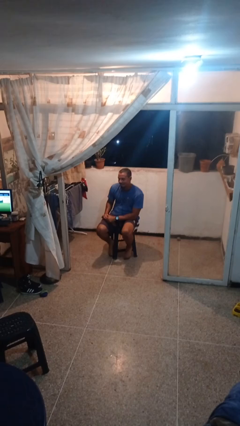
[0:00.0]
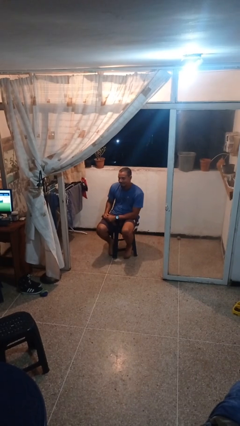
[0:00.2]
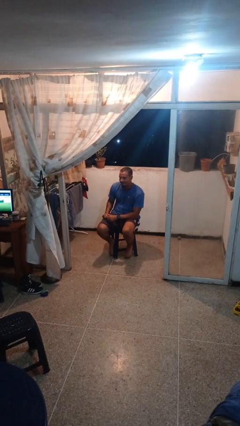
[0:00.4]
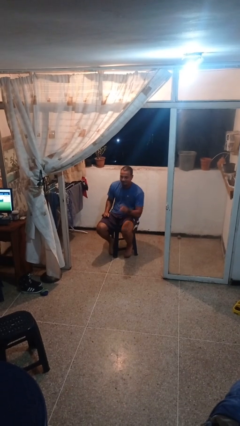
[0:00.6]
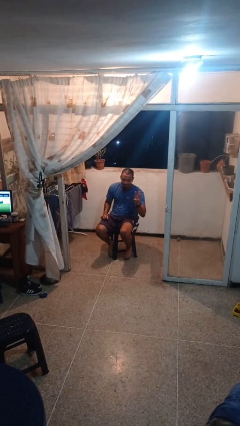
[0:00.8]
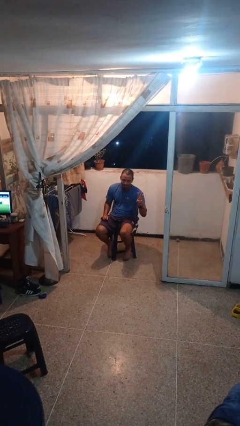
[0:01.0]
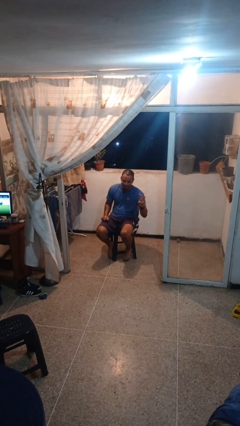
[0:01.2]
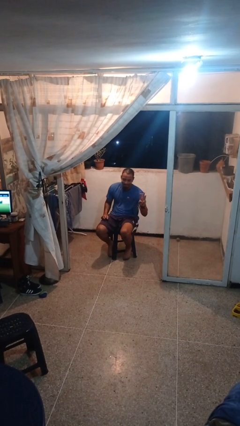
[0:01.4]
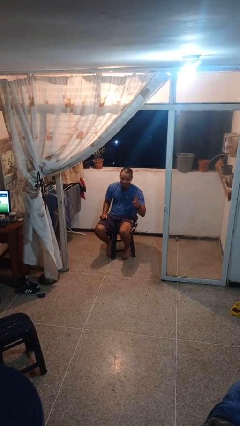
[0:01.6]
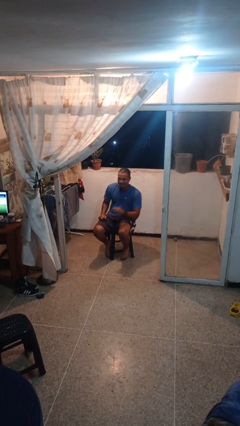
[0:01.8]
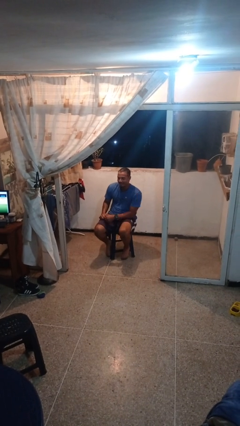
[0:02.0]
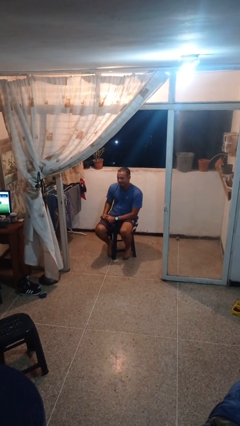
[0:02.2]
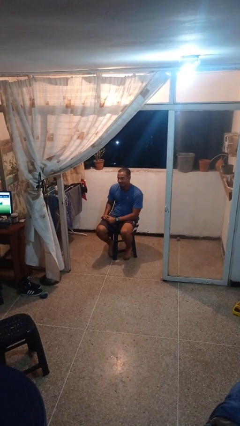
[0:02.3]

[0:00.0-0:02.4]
person gestures number three

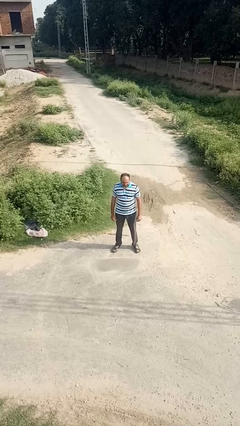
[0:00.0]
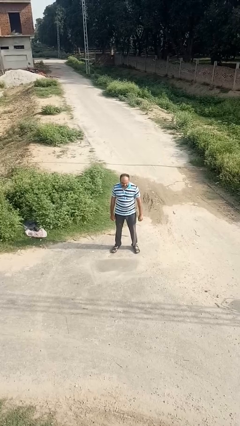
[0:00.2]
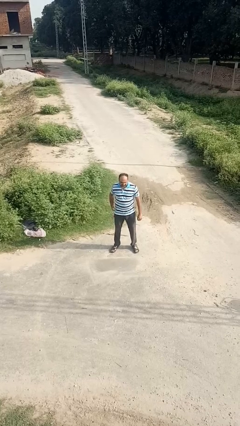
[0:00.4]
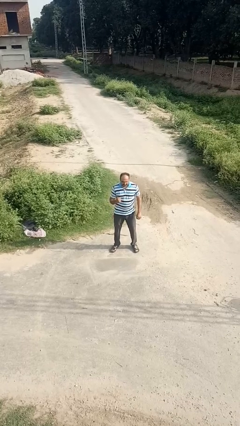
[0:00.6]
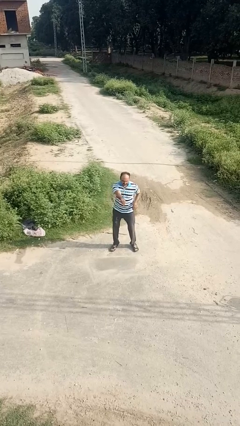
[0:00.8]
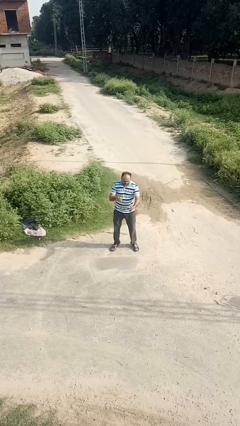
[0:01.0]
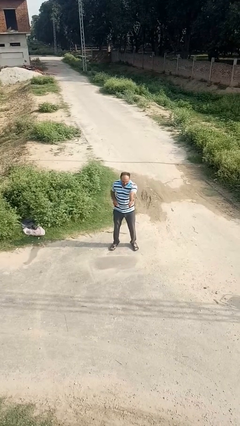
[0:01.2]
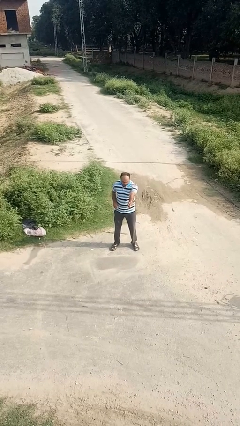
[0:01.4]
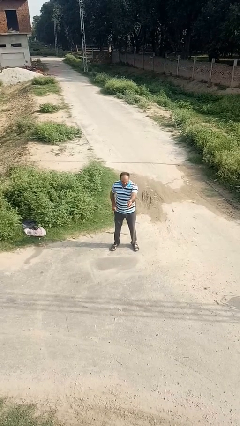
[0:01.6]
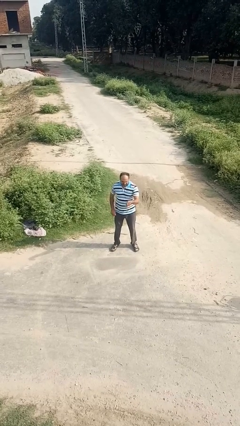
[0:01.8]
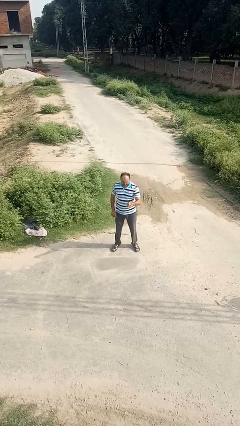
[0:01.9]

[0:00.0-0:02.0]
person punches

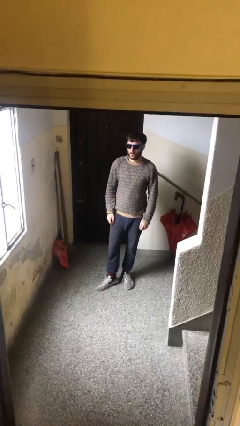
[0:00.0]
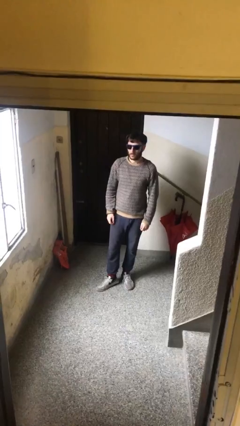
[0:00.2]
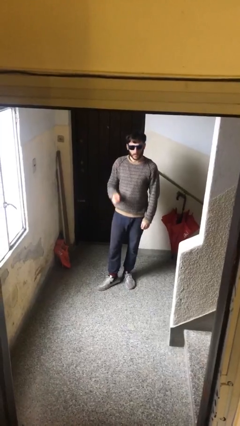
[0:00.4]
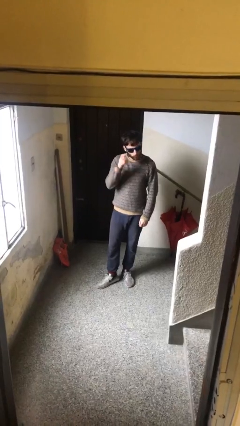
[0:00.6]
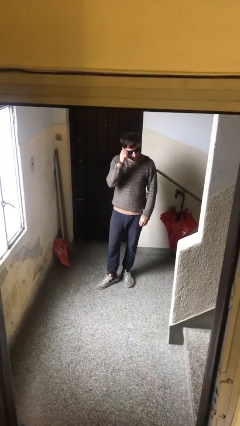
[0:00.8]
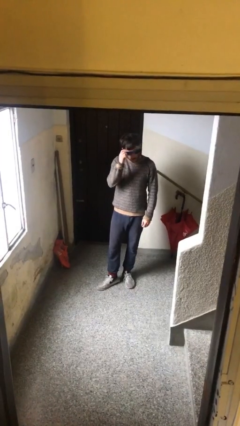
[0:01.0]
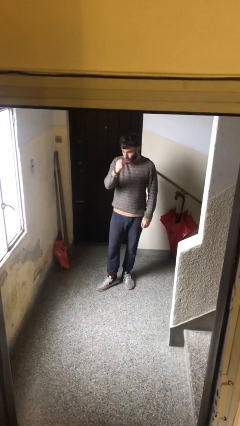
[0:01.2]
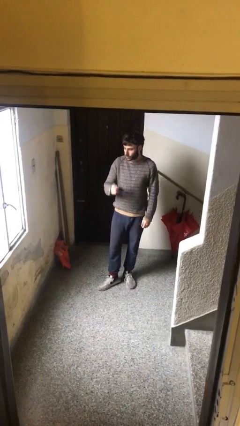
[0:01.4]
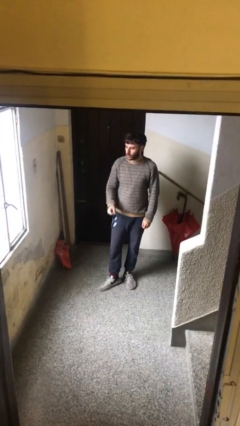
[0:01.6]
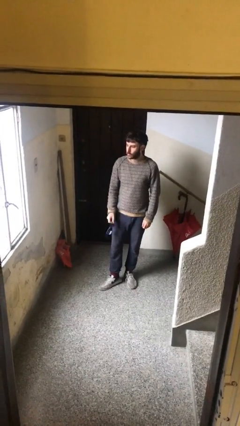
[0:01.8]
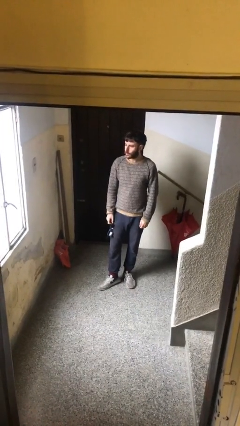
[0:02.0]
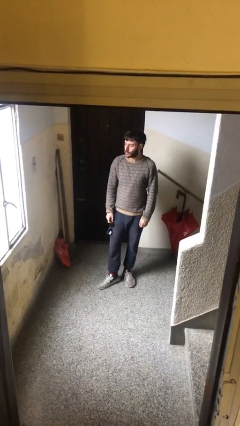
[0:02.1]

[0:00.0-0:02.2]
person takes off sunglasses

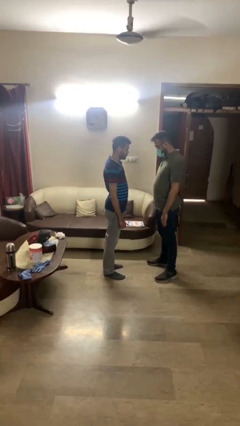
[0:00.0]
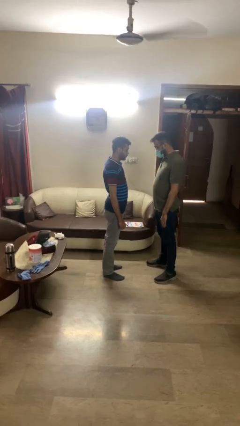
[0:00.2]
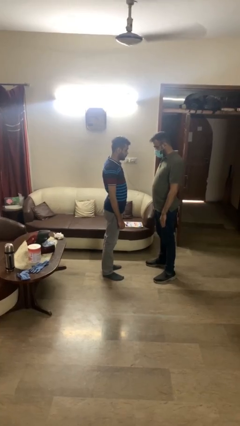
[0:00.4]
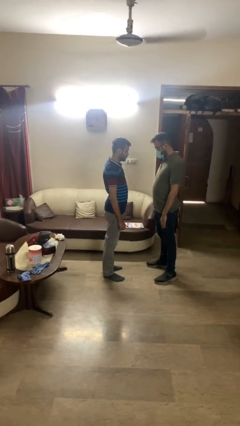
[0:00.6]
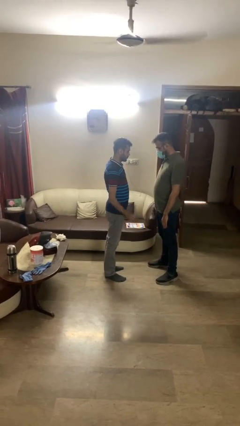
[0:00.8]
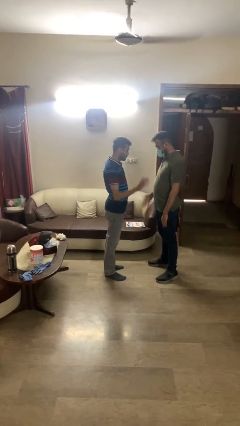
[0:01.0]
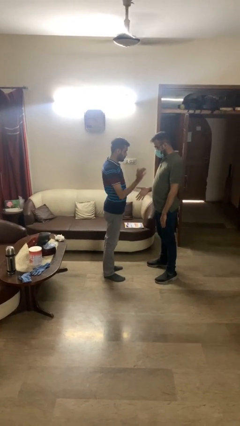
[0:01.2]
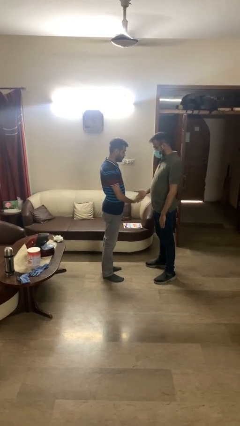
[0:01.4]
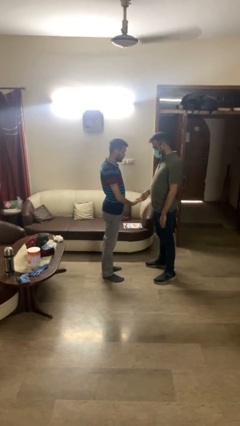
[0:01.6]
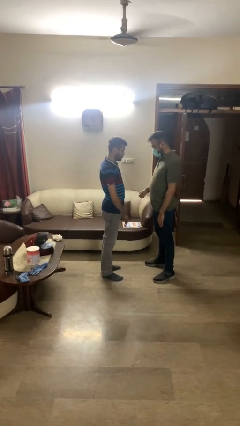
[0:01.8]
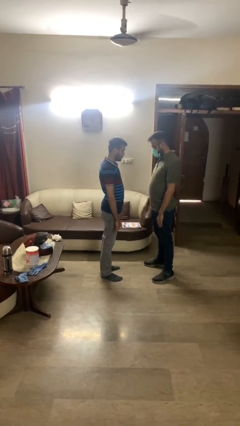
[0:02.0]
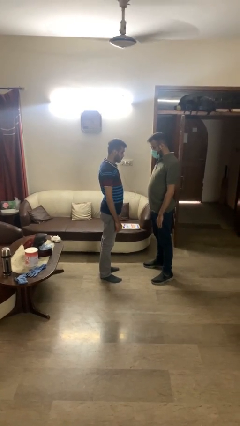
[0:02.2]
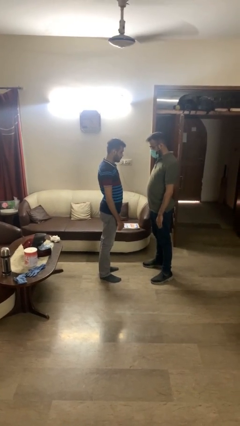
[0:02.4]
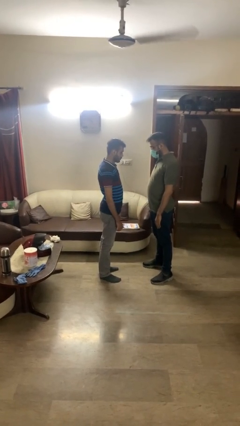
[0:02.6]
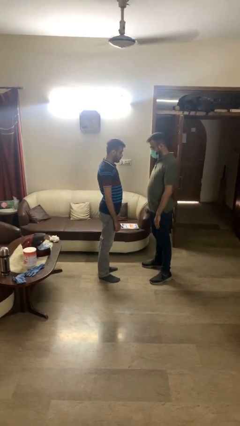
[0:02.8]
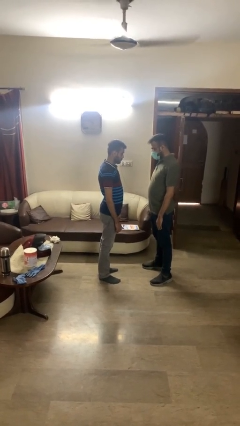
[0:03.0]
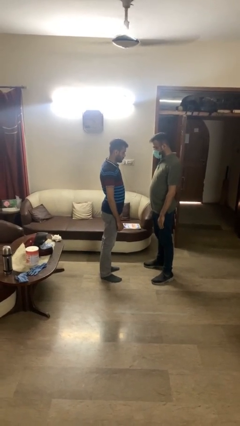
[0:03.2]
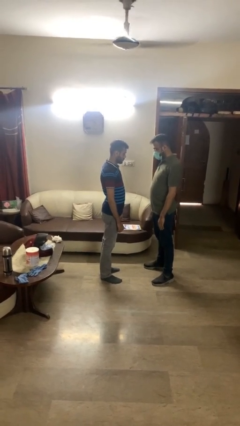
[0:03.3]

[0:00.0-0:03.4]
person highfives hand

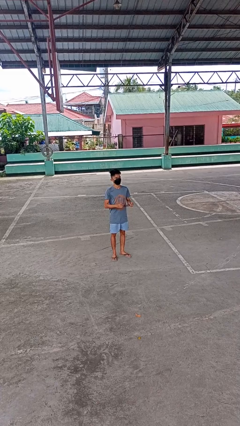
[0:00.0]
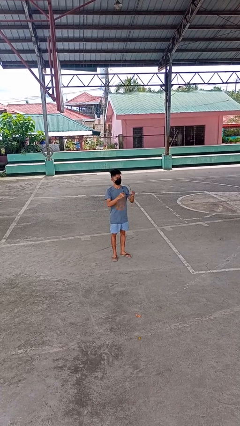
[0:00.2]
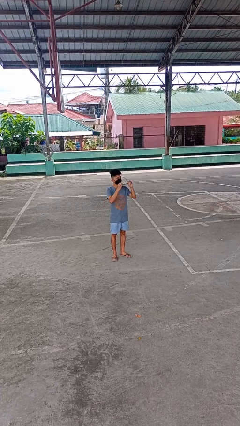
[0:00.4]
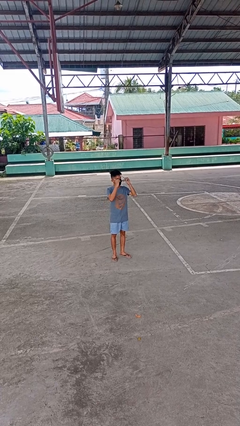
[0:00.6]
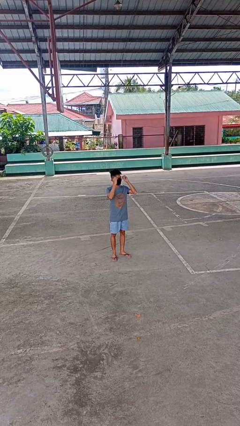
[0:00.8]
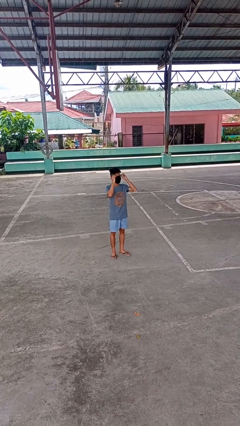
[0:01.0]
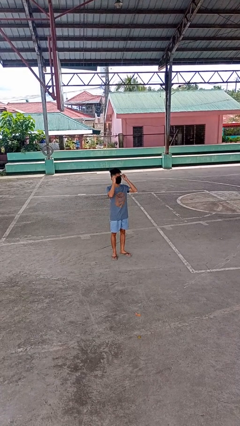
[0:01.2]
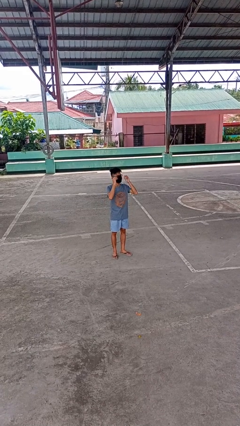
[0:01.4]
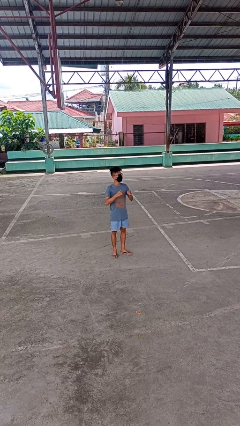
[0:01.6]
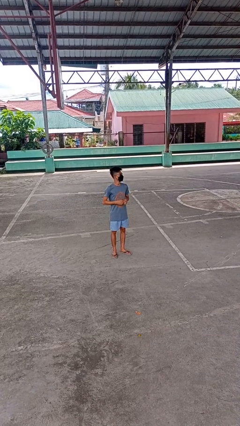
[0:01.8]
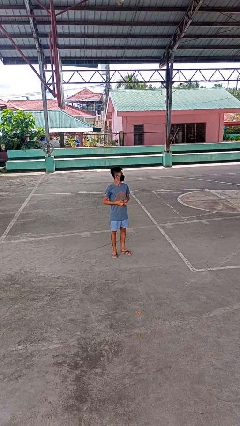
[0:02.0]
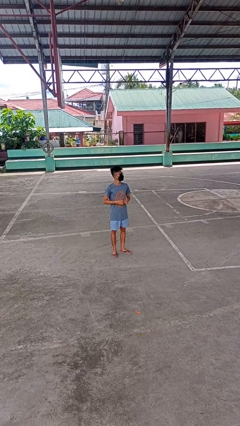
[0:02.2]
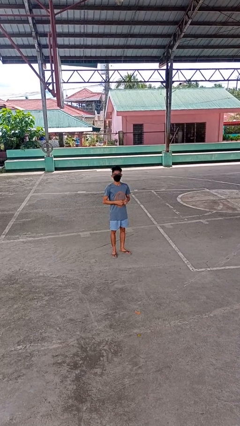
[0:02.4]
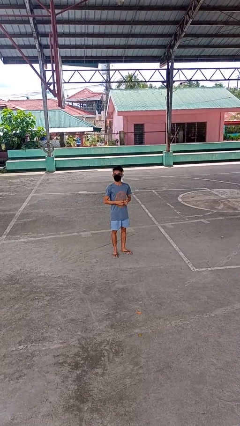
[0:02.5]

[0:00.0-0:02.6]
person puts on glasses

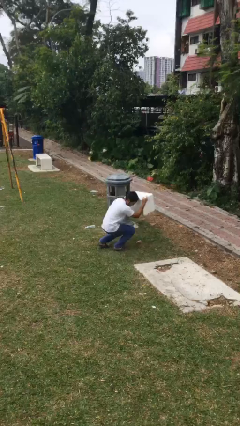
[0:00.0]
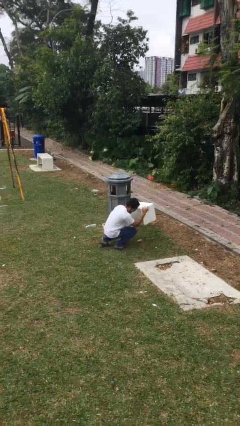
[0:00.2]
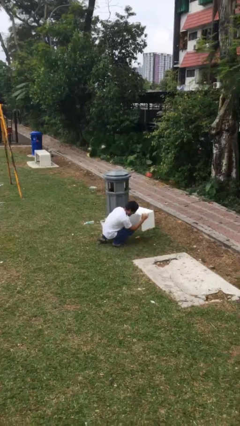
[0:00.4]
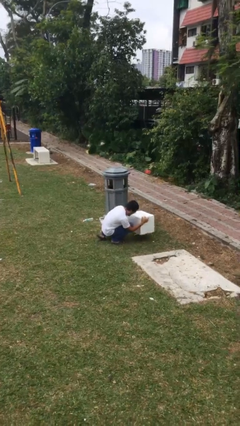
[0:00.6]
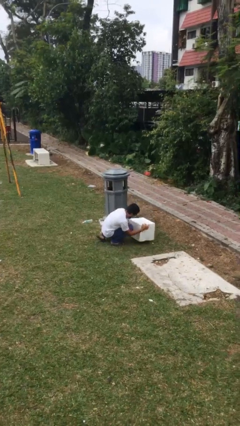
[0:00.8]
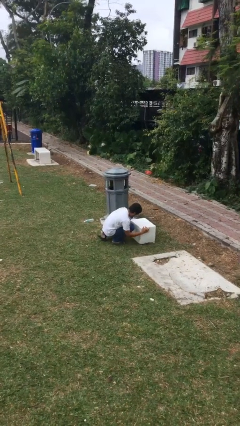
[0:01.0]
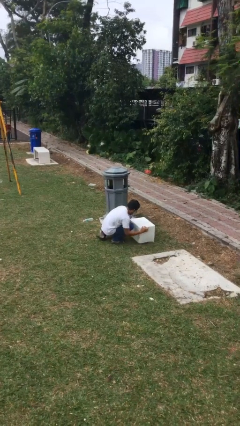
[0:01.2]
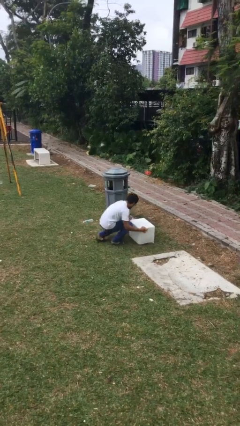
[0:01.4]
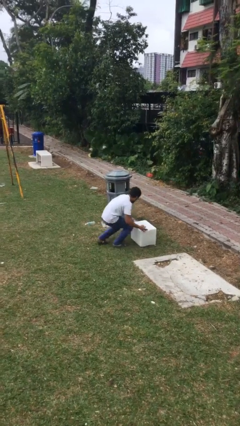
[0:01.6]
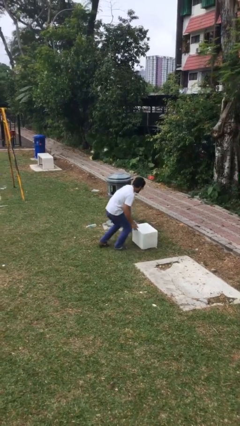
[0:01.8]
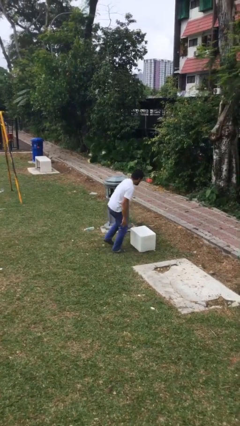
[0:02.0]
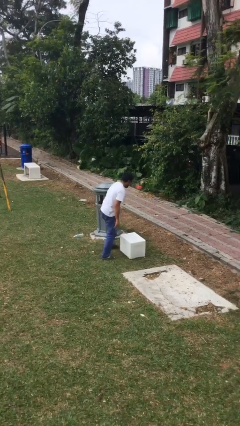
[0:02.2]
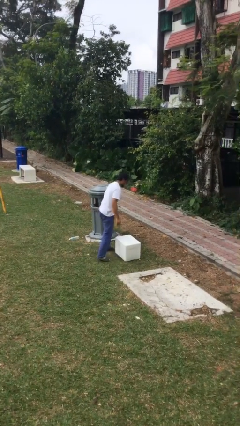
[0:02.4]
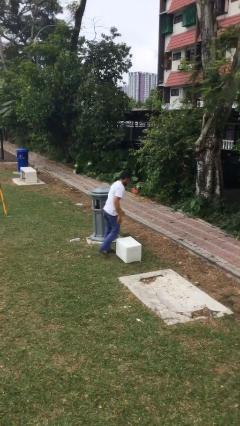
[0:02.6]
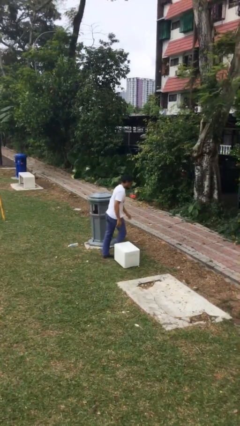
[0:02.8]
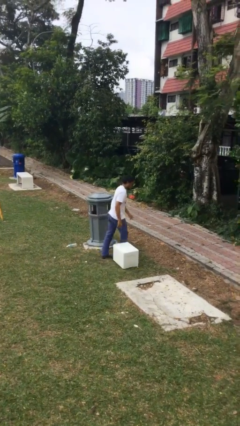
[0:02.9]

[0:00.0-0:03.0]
person puts down object on floor

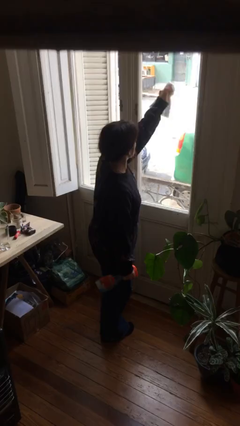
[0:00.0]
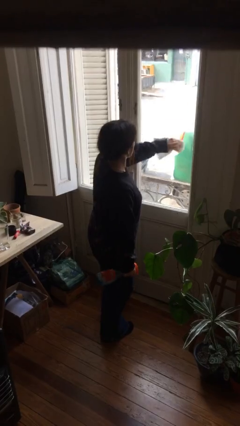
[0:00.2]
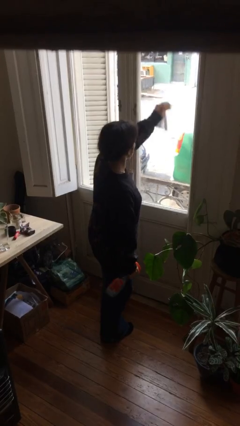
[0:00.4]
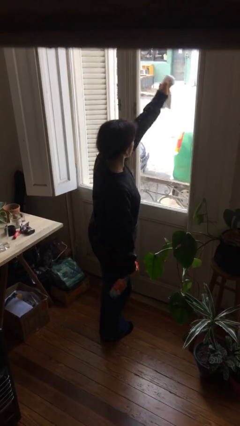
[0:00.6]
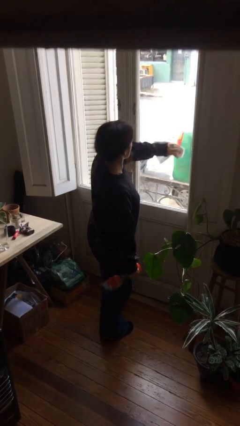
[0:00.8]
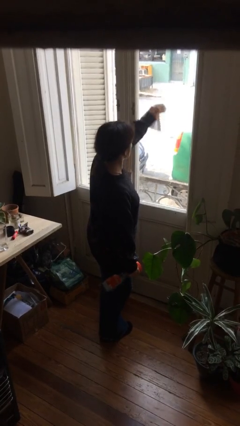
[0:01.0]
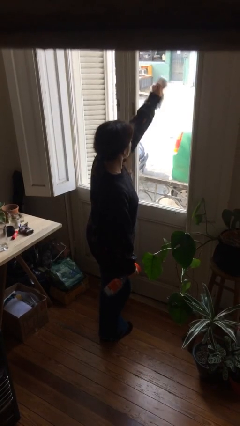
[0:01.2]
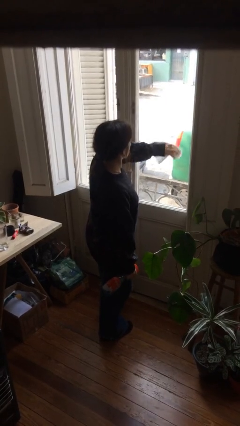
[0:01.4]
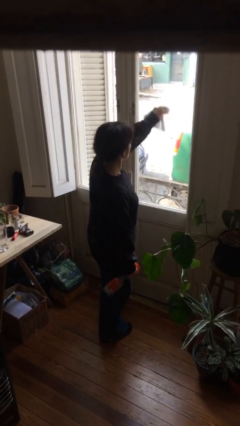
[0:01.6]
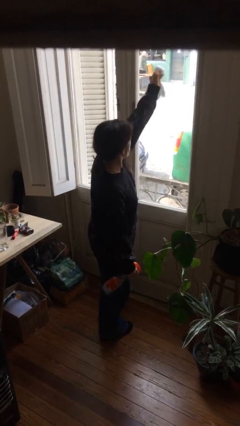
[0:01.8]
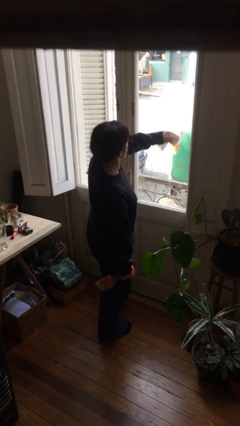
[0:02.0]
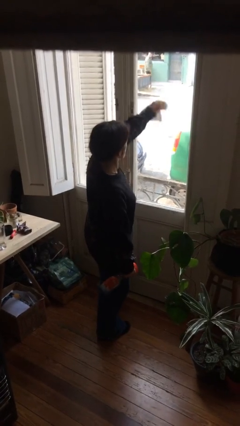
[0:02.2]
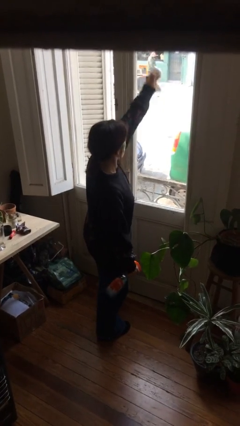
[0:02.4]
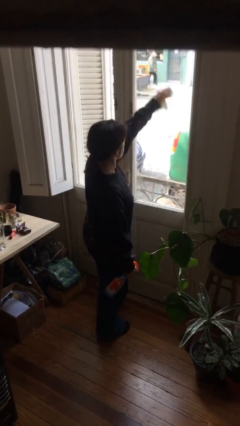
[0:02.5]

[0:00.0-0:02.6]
person washes window
